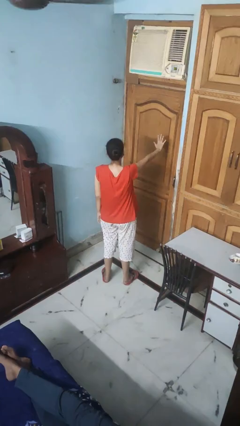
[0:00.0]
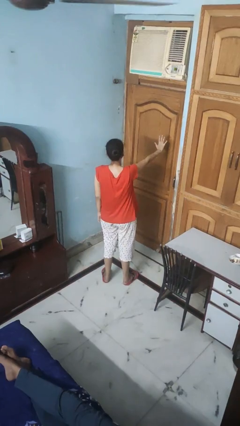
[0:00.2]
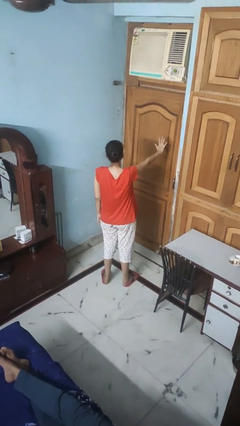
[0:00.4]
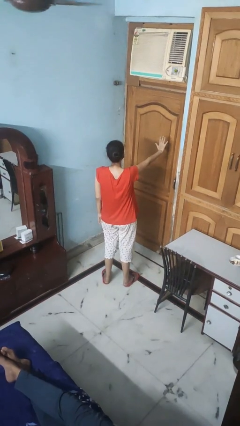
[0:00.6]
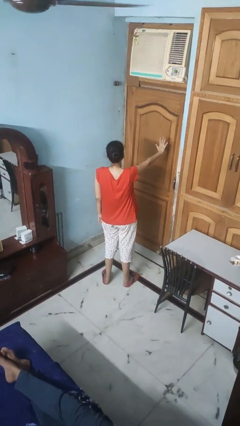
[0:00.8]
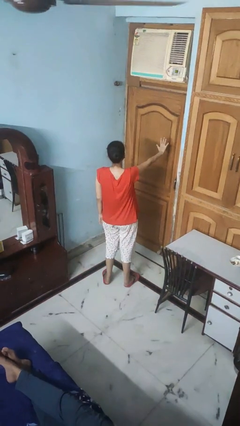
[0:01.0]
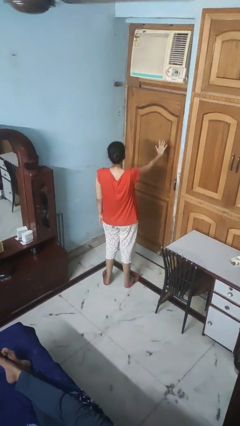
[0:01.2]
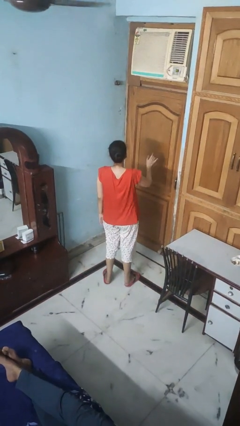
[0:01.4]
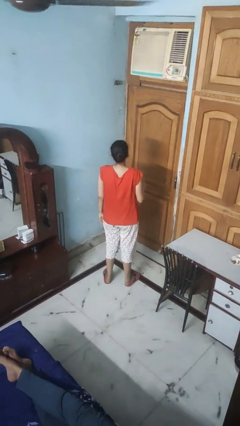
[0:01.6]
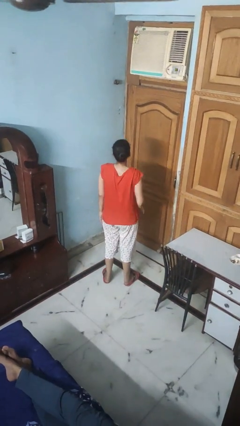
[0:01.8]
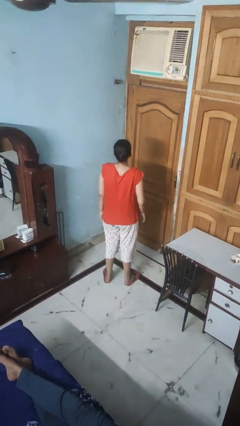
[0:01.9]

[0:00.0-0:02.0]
person gestures number five

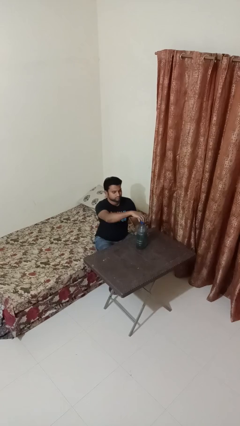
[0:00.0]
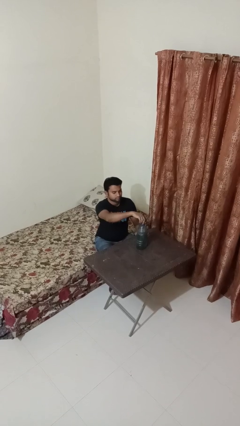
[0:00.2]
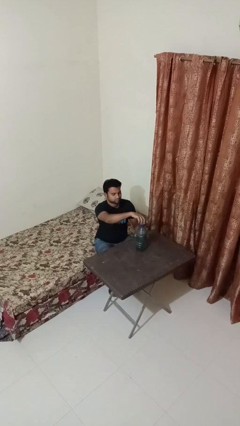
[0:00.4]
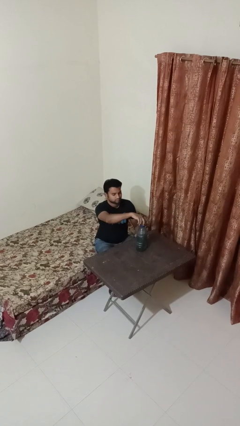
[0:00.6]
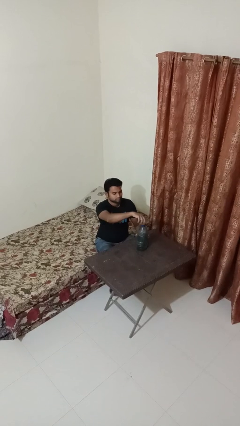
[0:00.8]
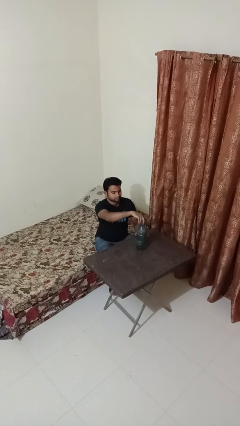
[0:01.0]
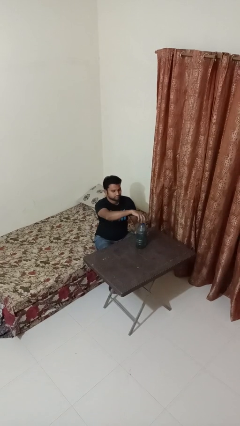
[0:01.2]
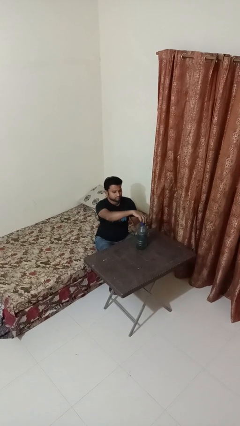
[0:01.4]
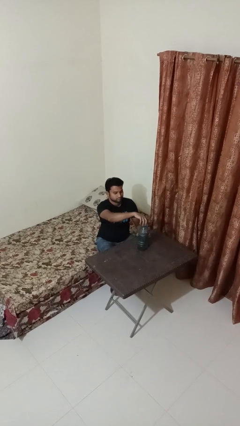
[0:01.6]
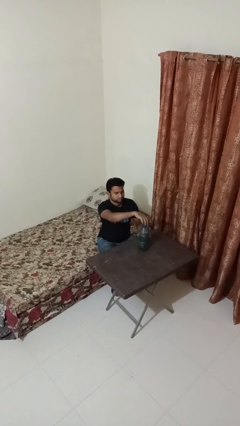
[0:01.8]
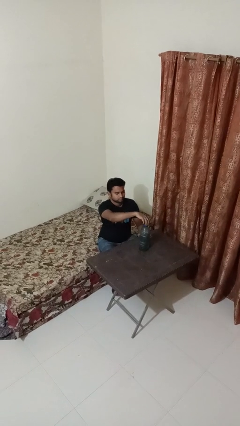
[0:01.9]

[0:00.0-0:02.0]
person screws lid to bottle

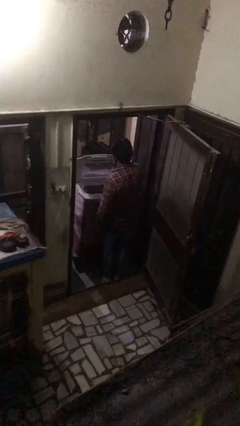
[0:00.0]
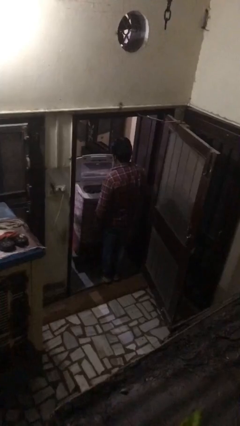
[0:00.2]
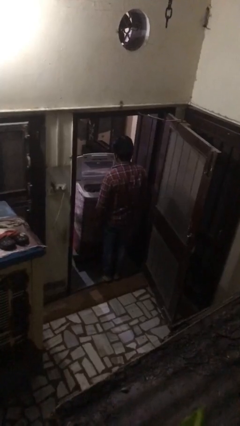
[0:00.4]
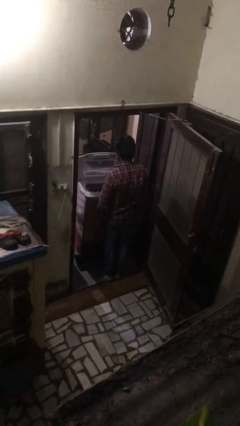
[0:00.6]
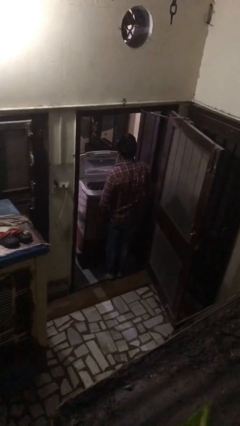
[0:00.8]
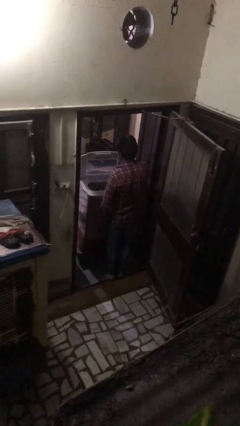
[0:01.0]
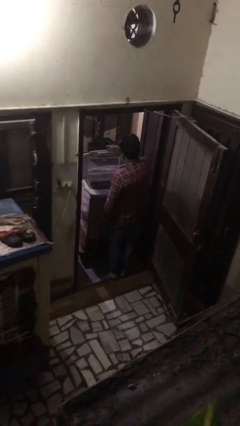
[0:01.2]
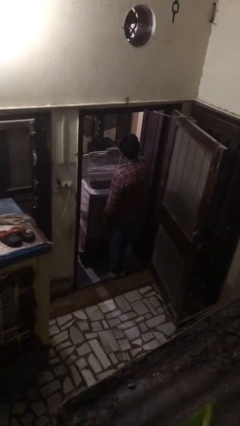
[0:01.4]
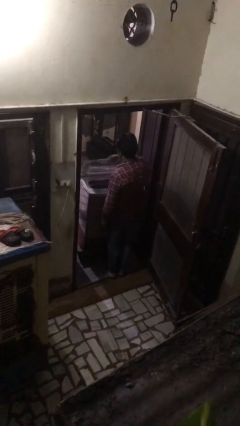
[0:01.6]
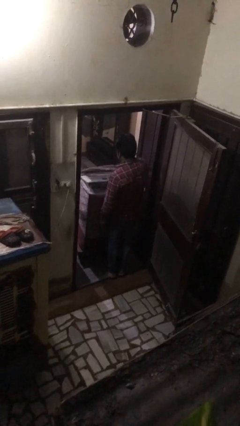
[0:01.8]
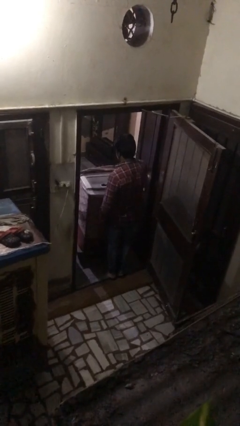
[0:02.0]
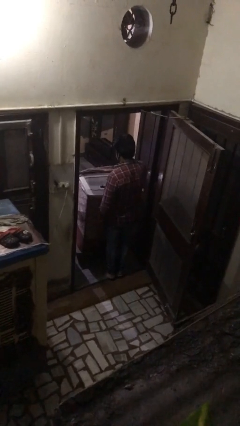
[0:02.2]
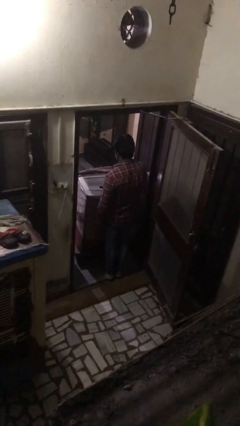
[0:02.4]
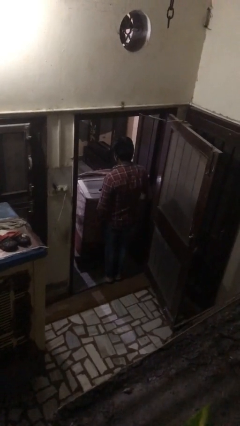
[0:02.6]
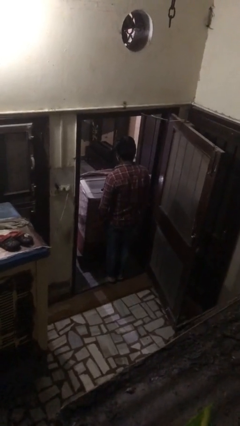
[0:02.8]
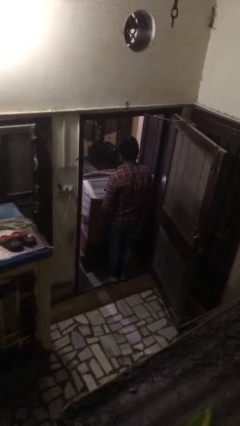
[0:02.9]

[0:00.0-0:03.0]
person closes clothes washer

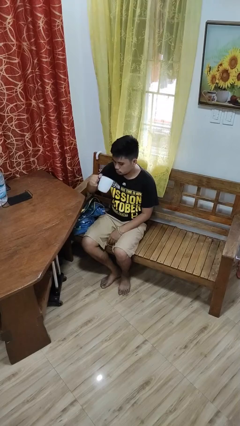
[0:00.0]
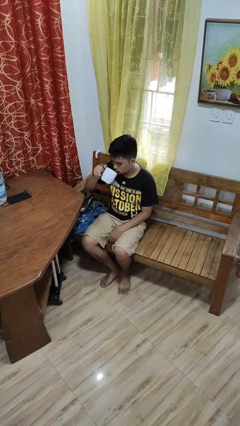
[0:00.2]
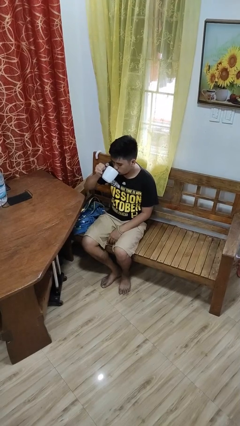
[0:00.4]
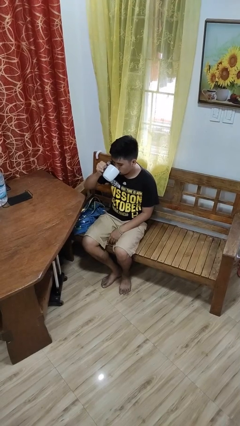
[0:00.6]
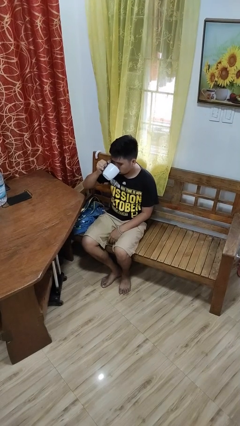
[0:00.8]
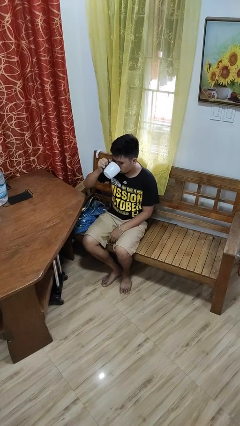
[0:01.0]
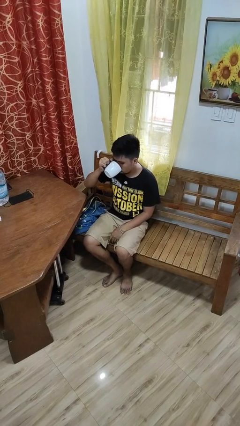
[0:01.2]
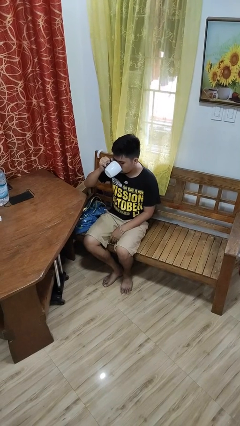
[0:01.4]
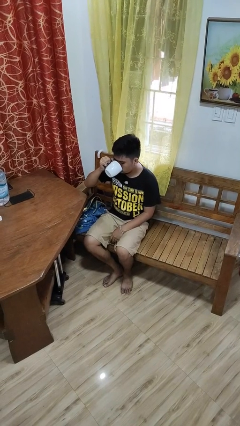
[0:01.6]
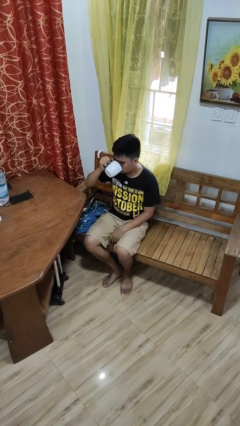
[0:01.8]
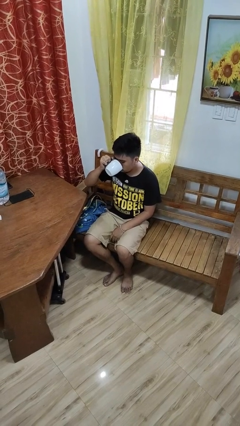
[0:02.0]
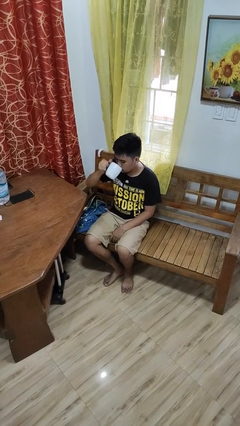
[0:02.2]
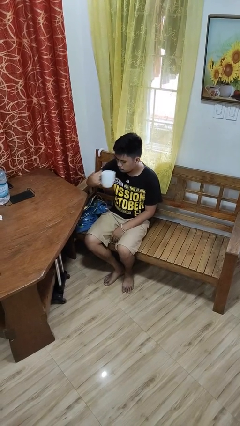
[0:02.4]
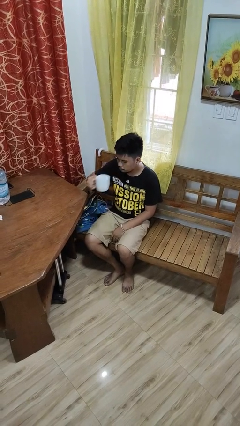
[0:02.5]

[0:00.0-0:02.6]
person drinks from mug

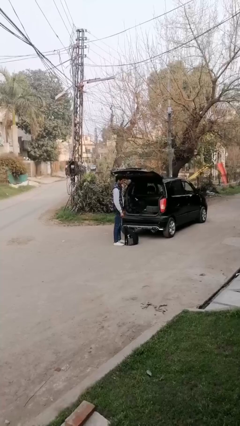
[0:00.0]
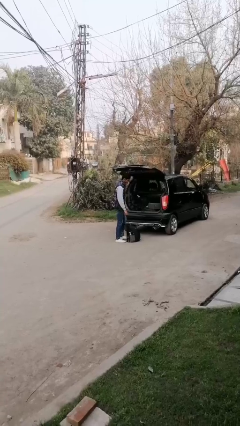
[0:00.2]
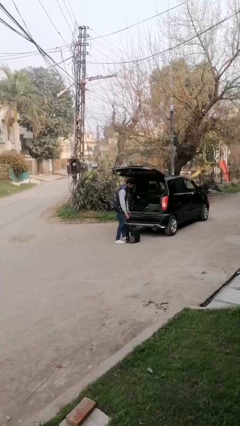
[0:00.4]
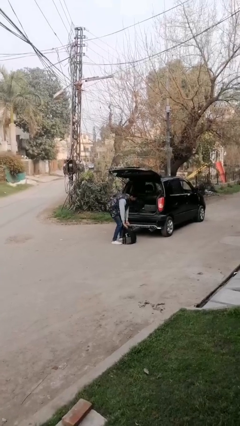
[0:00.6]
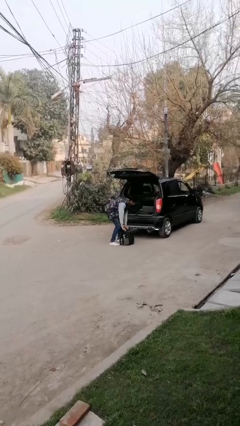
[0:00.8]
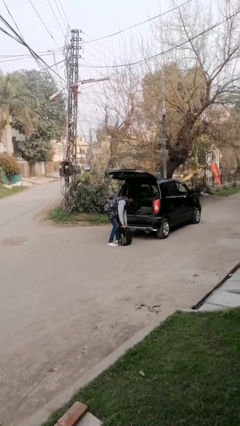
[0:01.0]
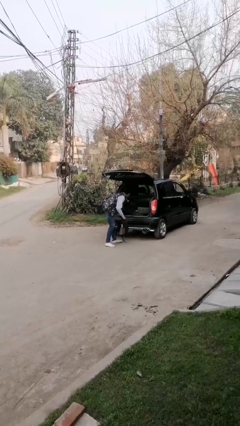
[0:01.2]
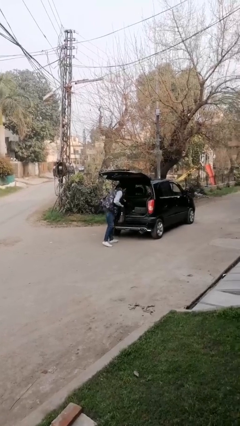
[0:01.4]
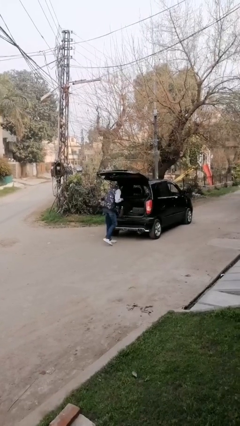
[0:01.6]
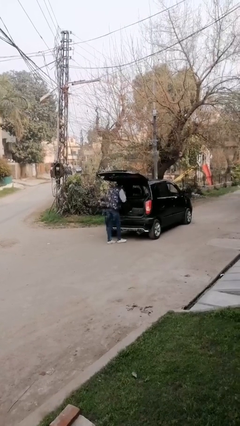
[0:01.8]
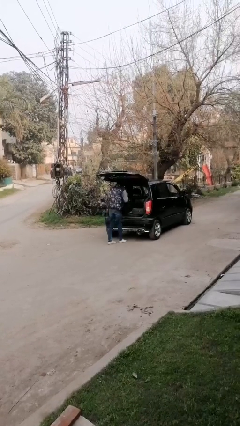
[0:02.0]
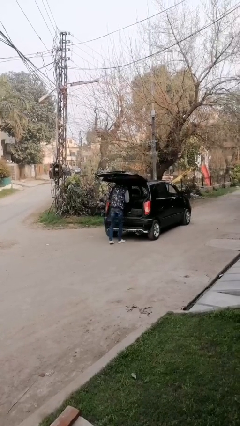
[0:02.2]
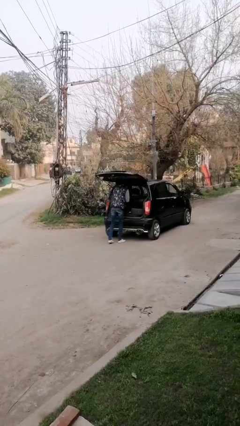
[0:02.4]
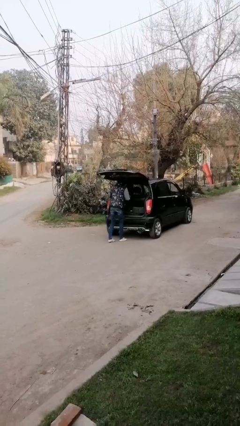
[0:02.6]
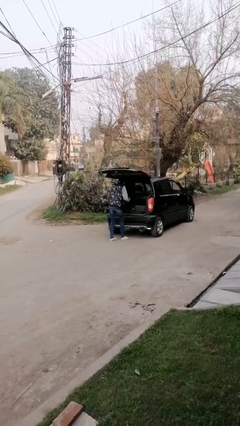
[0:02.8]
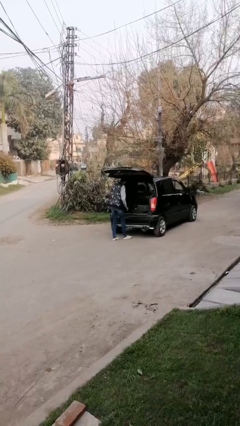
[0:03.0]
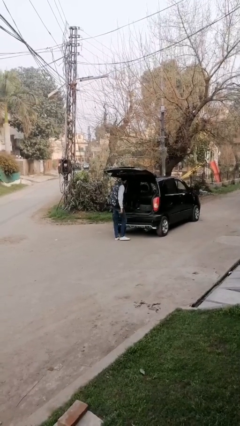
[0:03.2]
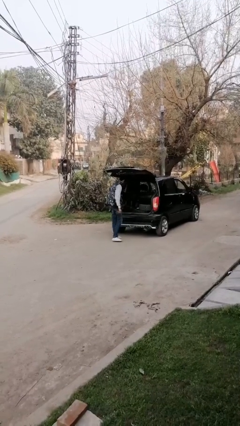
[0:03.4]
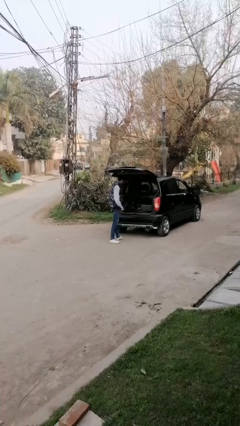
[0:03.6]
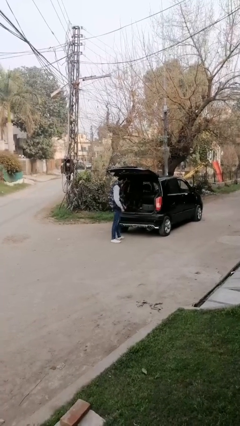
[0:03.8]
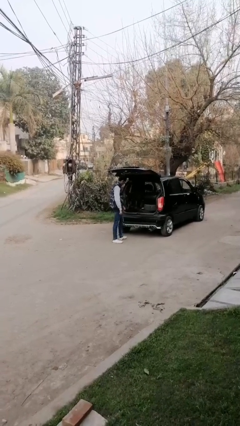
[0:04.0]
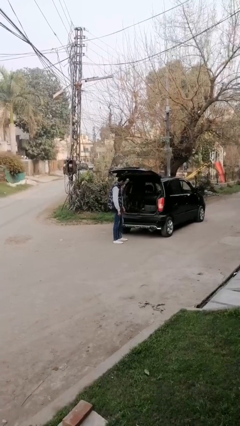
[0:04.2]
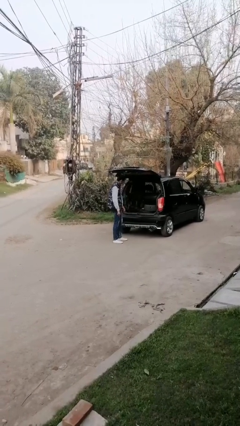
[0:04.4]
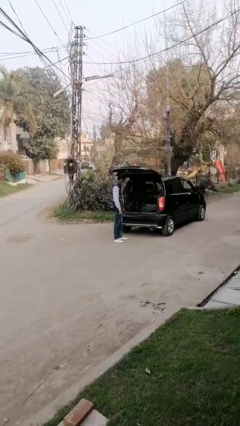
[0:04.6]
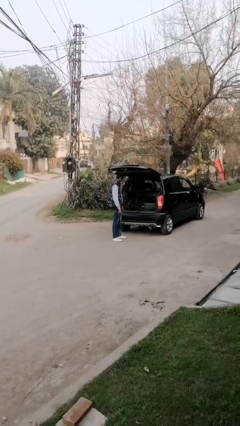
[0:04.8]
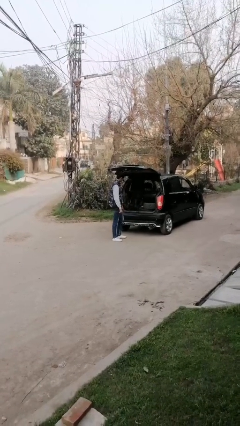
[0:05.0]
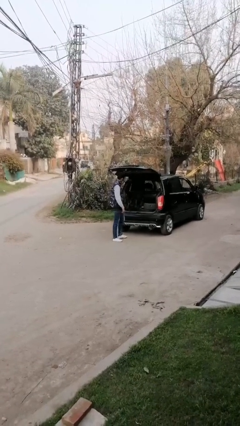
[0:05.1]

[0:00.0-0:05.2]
person loads car

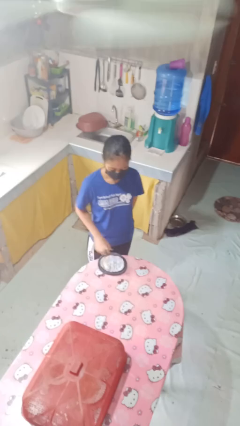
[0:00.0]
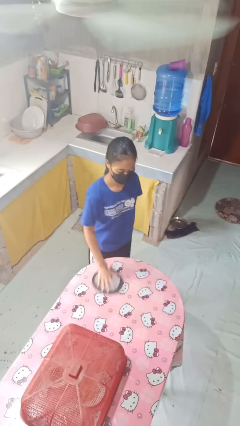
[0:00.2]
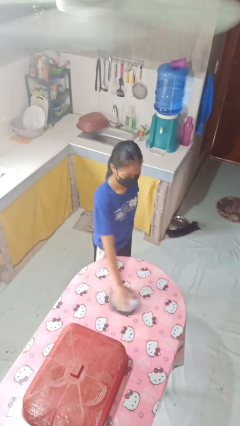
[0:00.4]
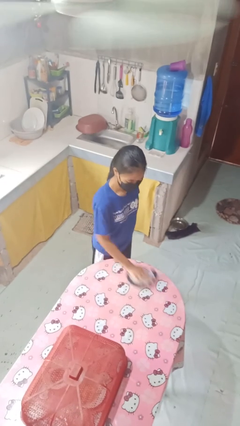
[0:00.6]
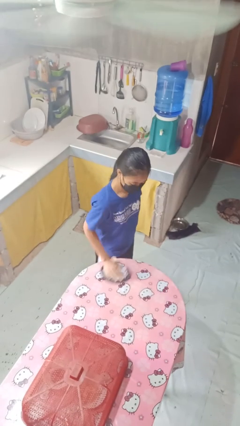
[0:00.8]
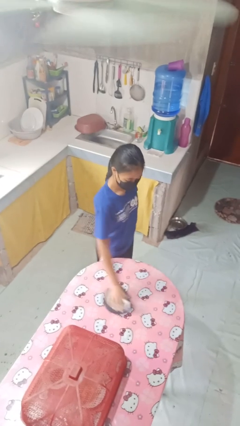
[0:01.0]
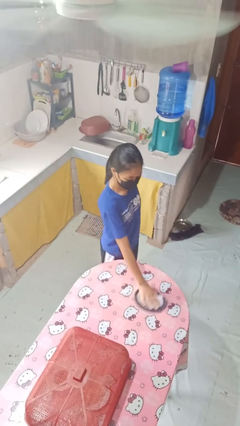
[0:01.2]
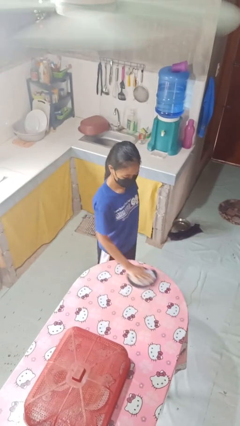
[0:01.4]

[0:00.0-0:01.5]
person cleans table with rag

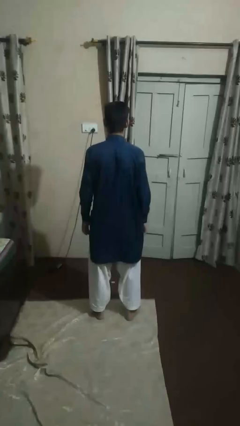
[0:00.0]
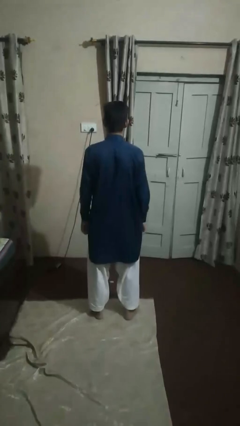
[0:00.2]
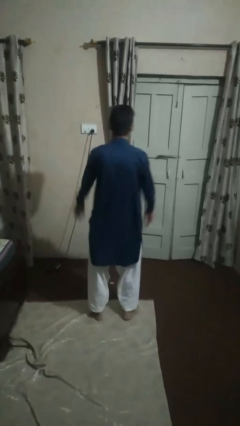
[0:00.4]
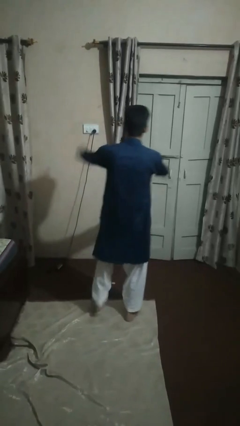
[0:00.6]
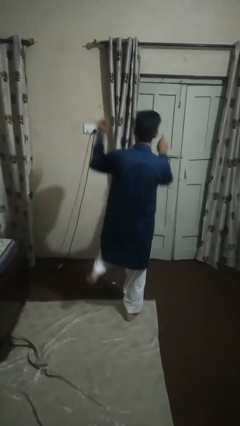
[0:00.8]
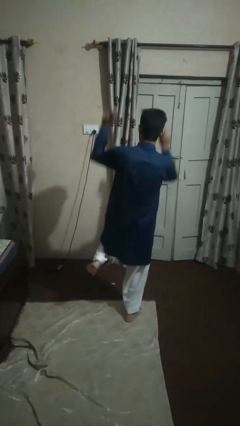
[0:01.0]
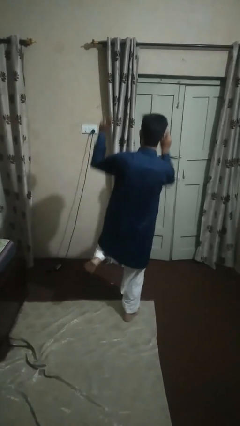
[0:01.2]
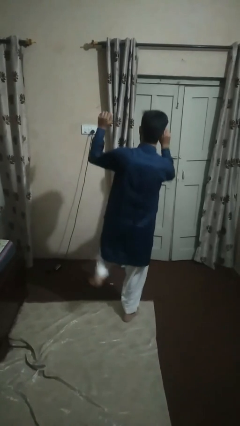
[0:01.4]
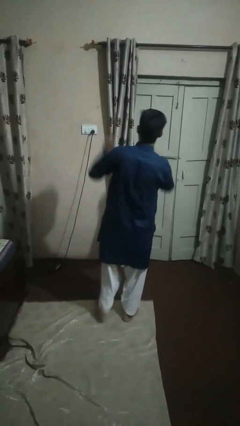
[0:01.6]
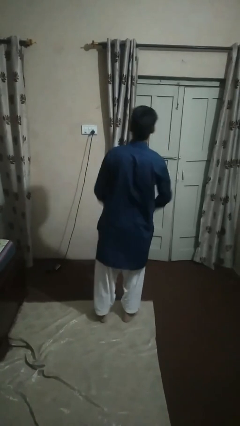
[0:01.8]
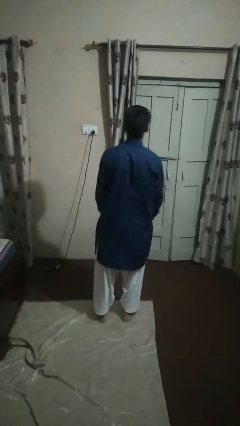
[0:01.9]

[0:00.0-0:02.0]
person dances in place
